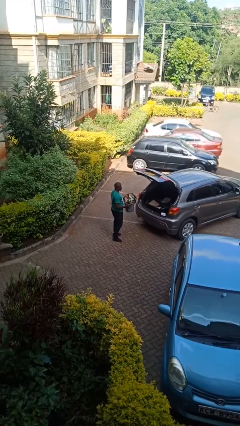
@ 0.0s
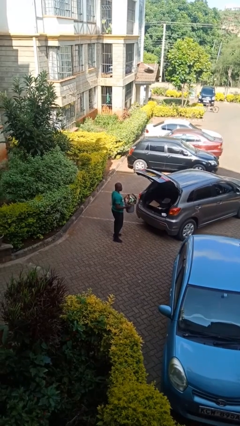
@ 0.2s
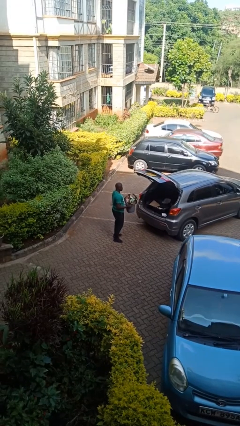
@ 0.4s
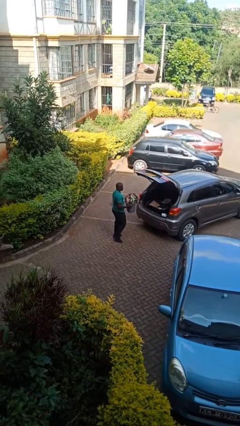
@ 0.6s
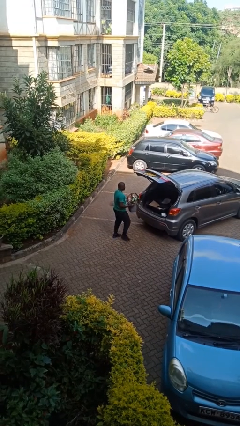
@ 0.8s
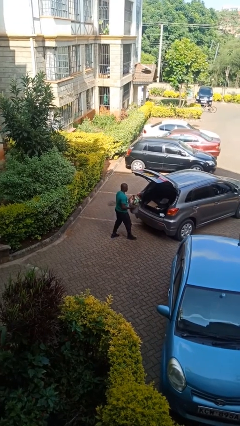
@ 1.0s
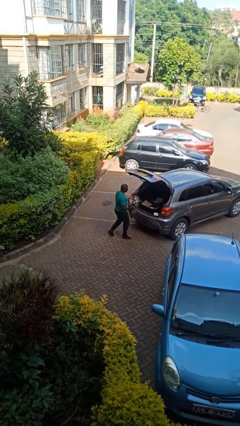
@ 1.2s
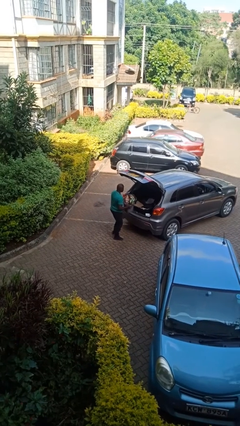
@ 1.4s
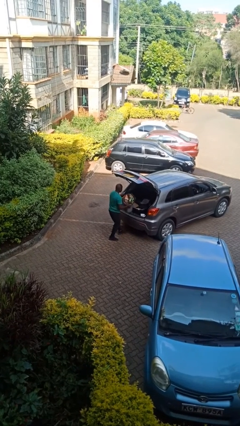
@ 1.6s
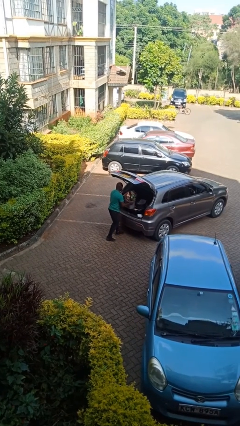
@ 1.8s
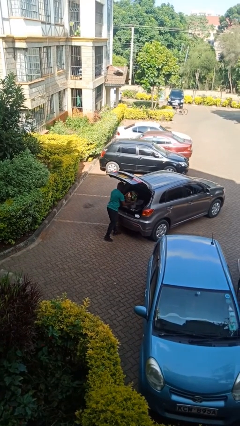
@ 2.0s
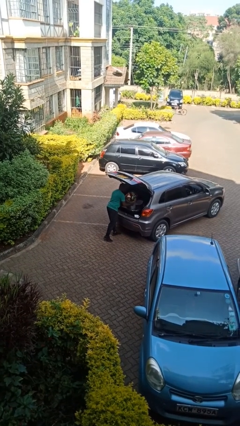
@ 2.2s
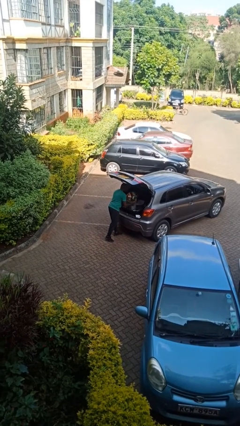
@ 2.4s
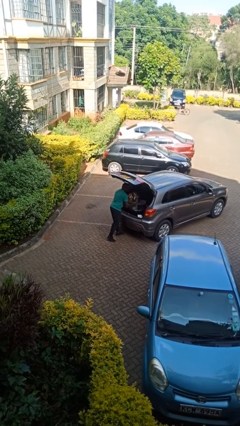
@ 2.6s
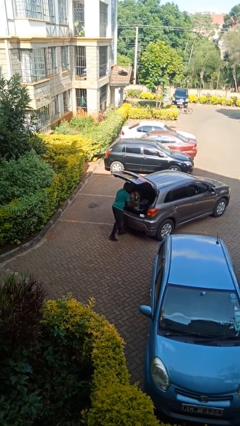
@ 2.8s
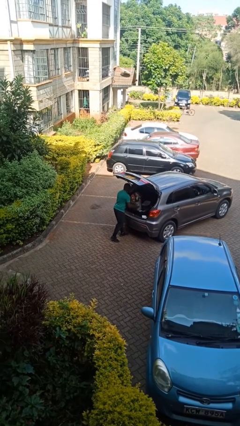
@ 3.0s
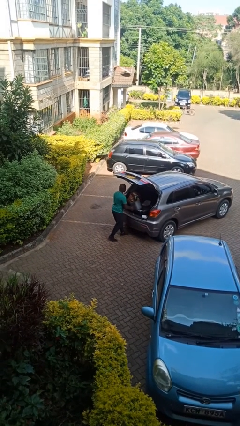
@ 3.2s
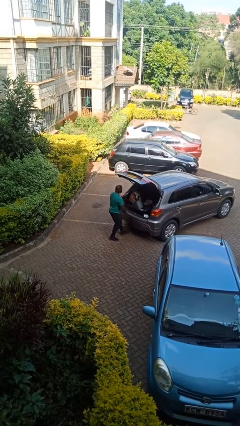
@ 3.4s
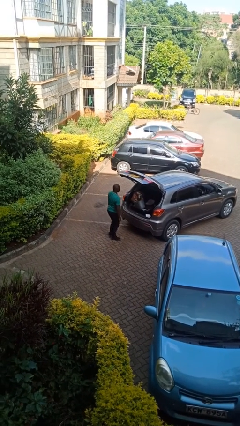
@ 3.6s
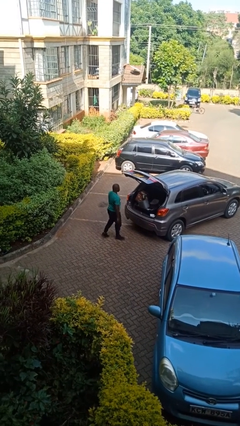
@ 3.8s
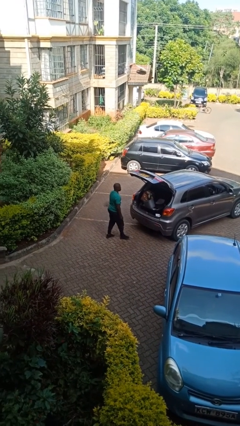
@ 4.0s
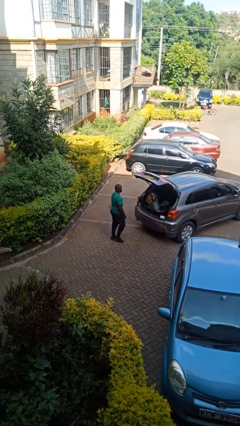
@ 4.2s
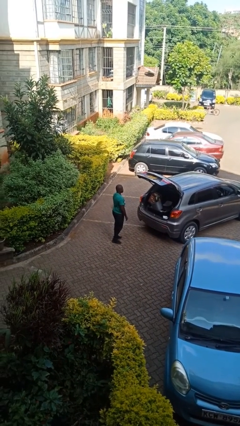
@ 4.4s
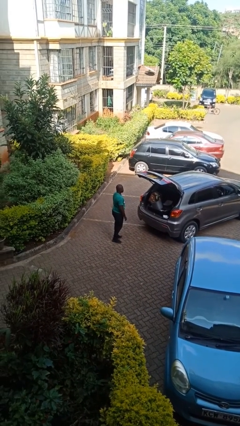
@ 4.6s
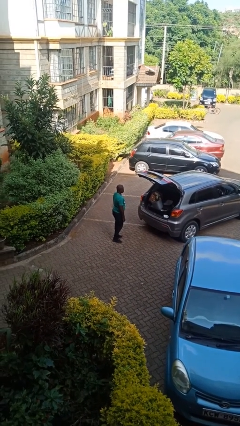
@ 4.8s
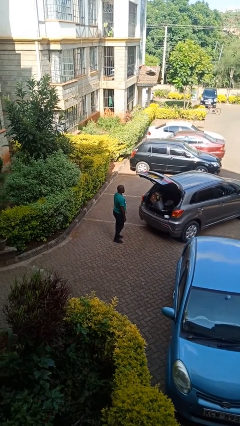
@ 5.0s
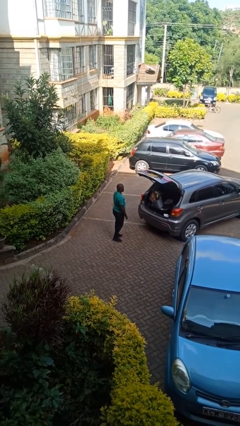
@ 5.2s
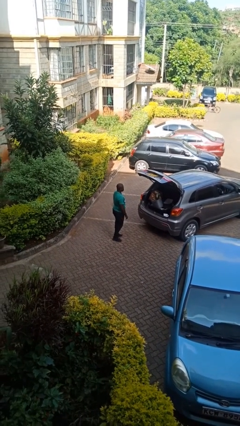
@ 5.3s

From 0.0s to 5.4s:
person loads car

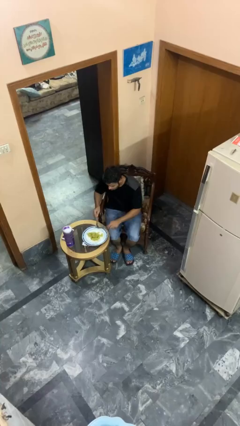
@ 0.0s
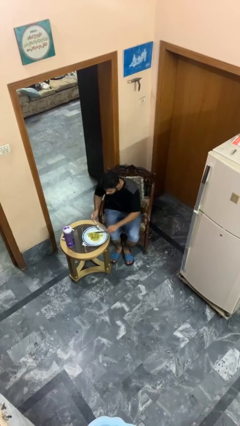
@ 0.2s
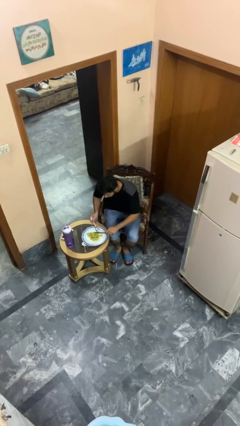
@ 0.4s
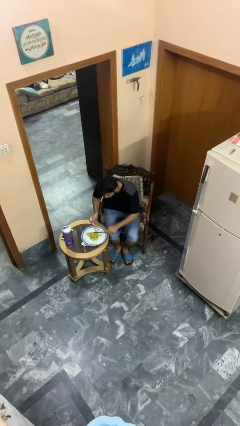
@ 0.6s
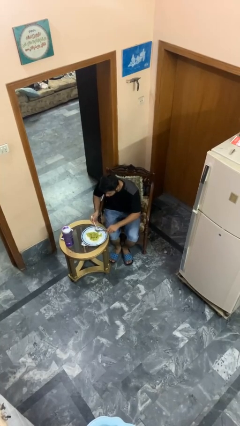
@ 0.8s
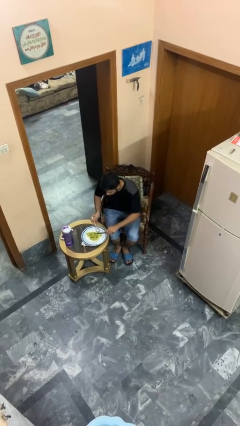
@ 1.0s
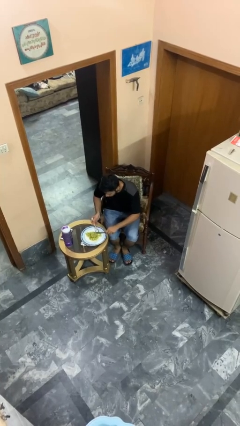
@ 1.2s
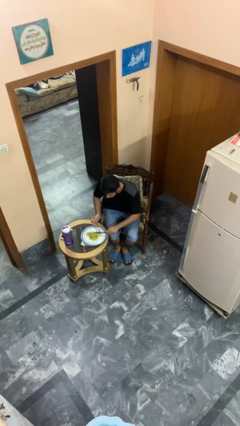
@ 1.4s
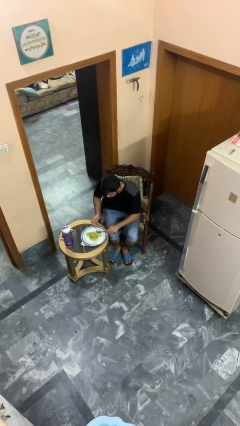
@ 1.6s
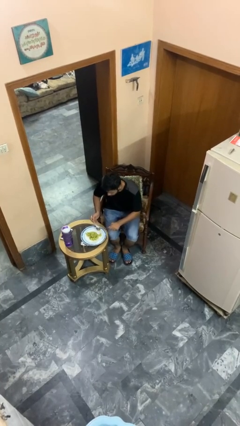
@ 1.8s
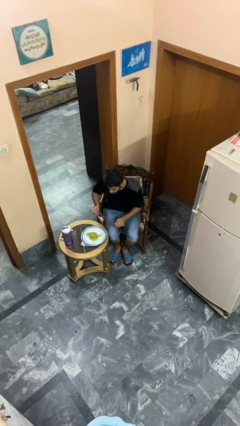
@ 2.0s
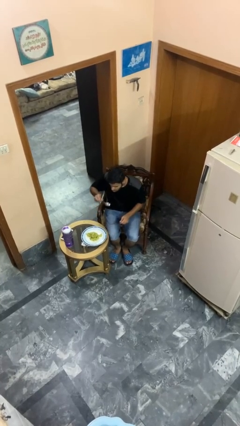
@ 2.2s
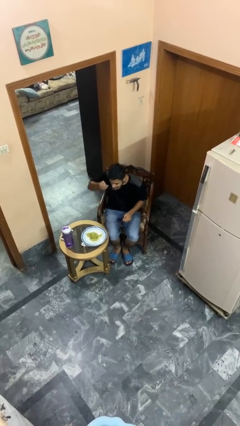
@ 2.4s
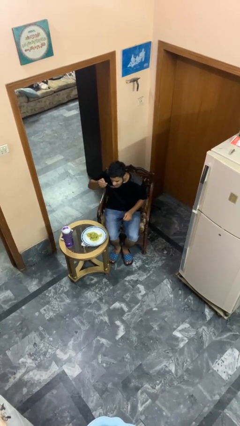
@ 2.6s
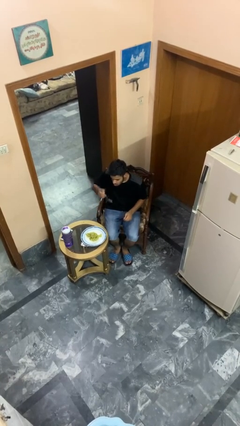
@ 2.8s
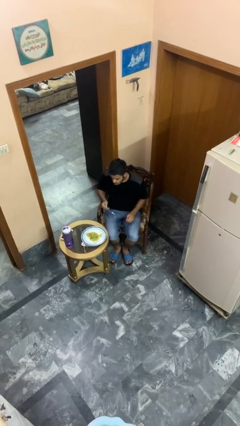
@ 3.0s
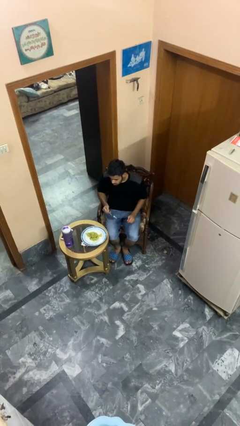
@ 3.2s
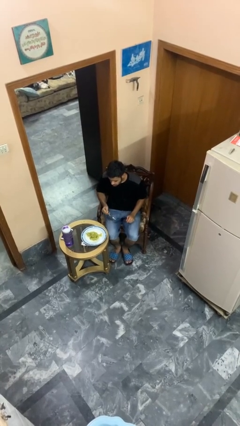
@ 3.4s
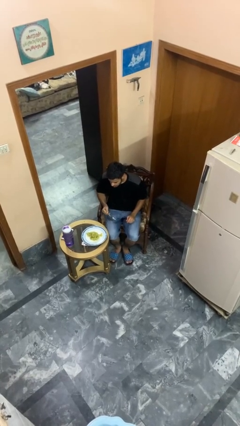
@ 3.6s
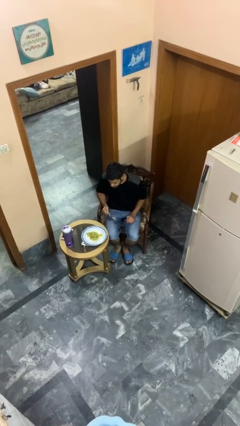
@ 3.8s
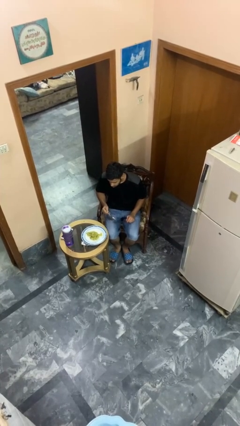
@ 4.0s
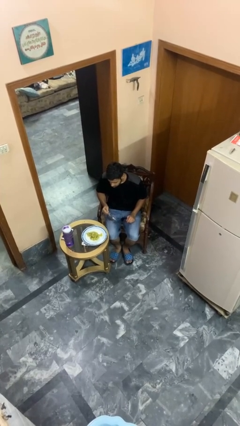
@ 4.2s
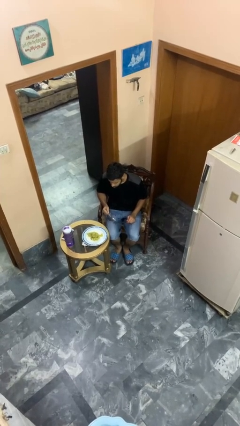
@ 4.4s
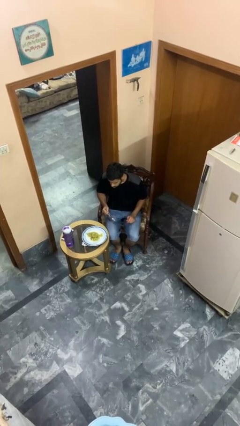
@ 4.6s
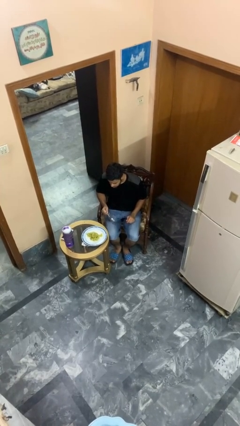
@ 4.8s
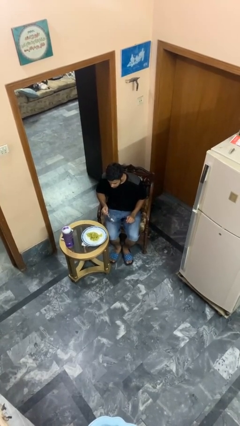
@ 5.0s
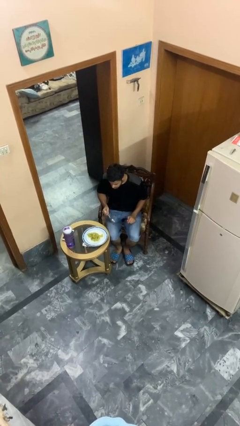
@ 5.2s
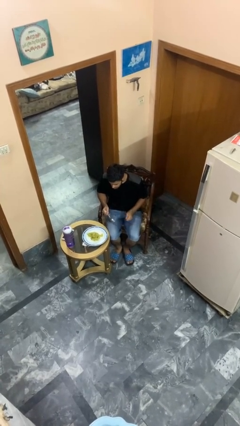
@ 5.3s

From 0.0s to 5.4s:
person eats with utensil

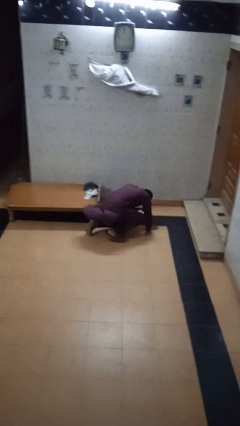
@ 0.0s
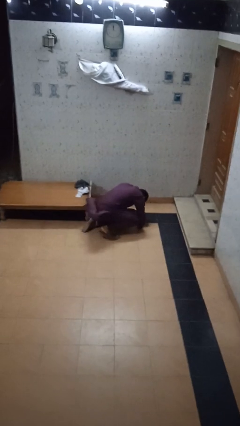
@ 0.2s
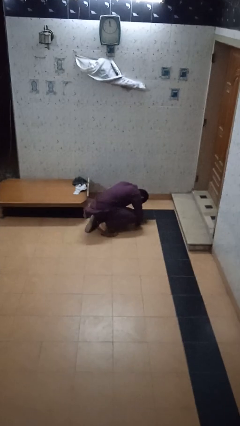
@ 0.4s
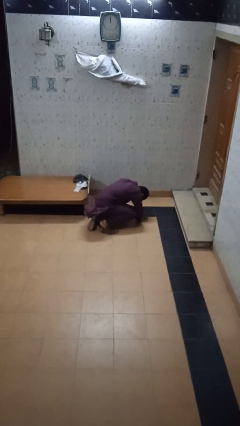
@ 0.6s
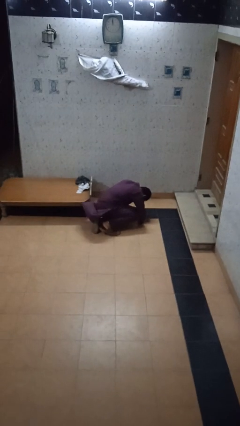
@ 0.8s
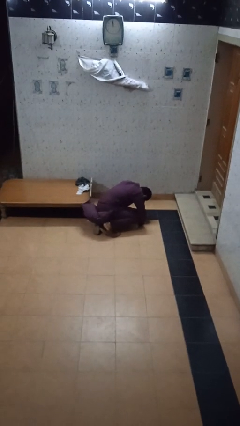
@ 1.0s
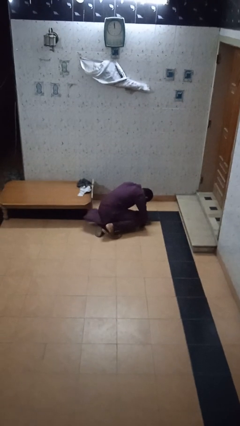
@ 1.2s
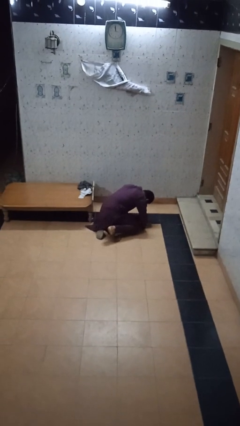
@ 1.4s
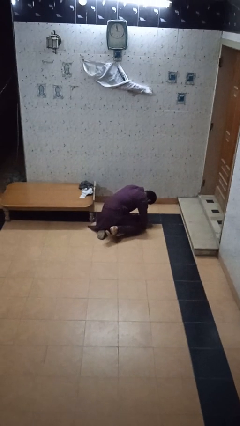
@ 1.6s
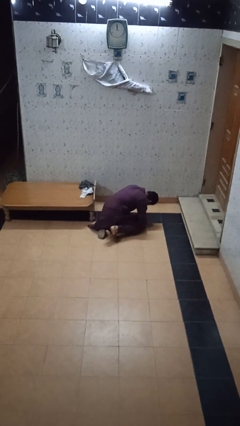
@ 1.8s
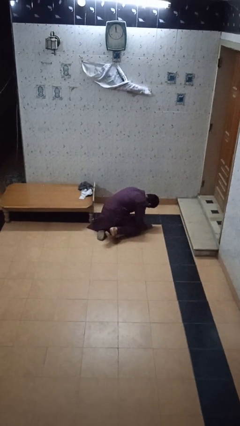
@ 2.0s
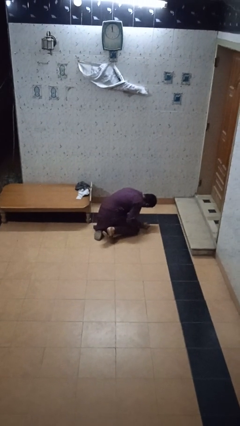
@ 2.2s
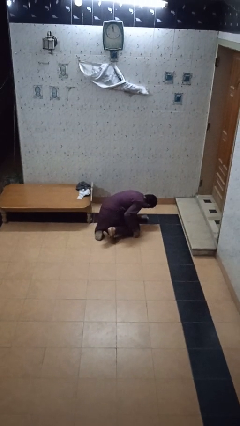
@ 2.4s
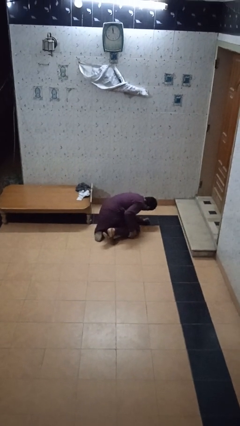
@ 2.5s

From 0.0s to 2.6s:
person lies down on floor

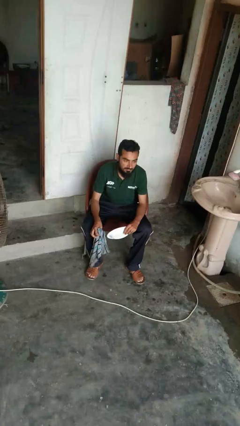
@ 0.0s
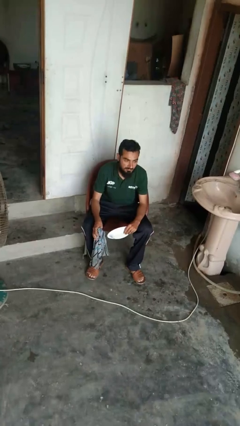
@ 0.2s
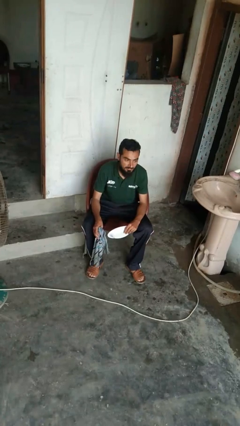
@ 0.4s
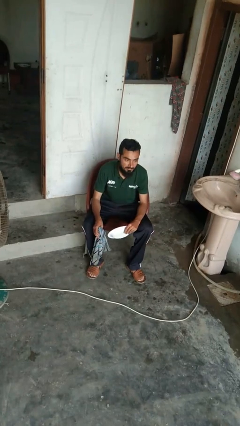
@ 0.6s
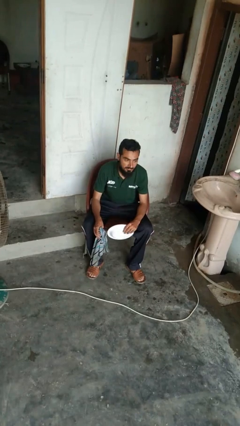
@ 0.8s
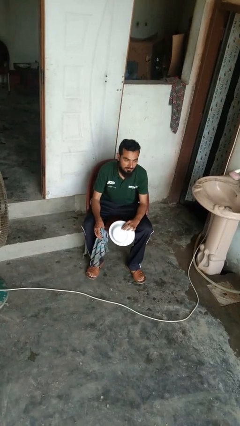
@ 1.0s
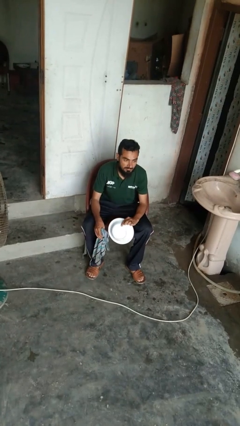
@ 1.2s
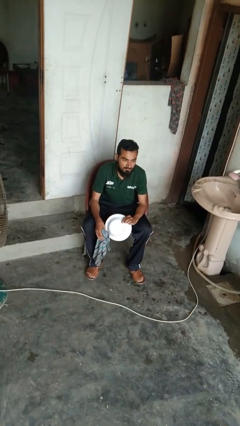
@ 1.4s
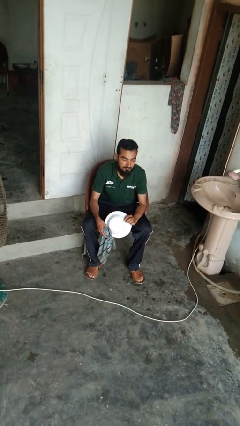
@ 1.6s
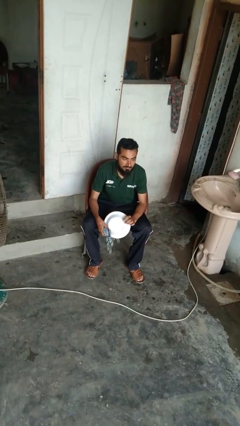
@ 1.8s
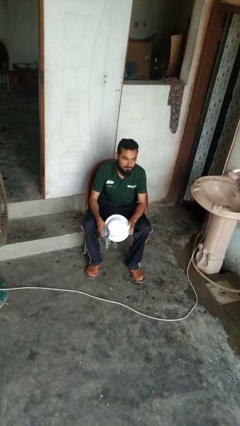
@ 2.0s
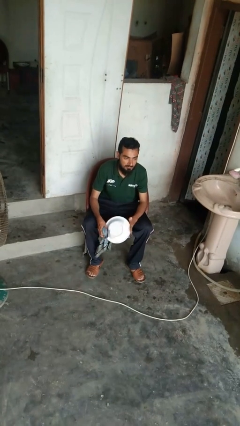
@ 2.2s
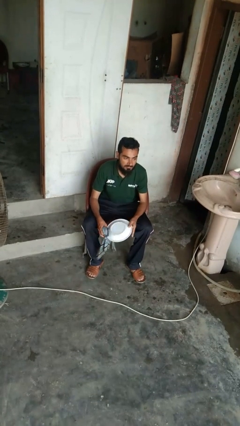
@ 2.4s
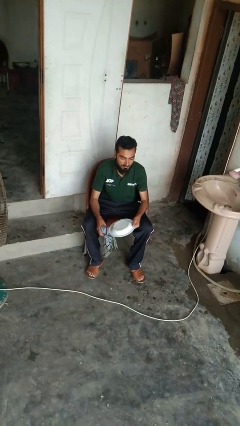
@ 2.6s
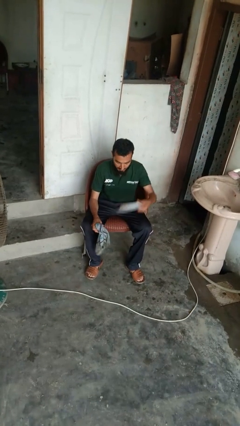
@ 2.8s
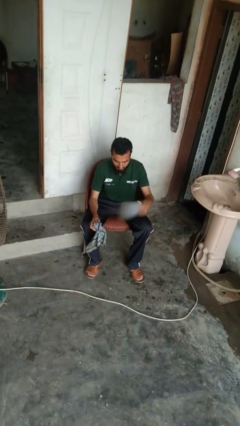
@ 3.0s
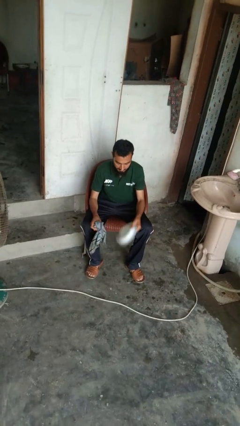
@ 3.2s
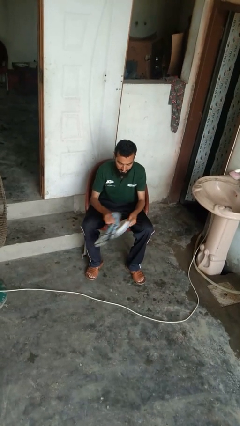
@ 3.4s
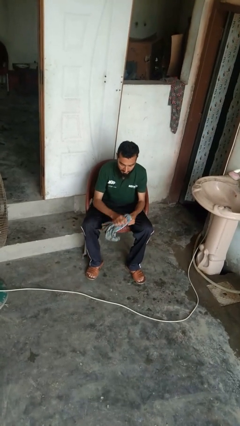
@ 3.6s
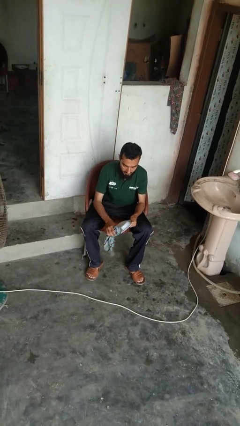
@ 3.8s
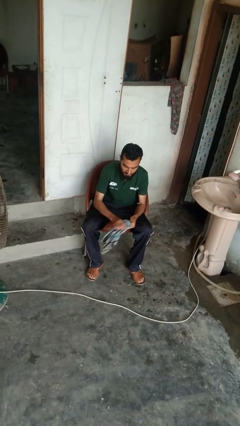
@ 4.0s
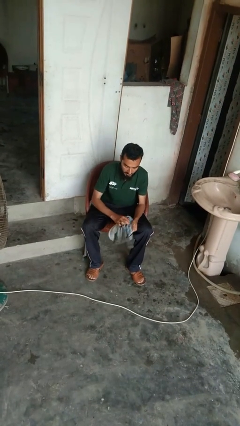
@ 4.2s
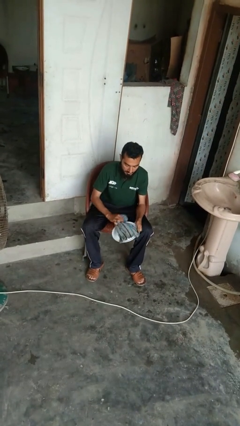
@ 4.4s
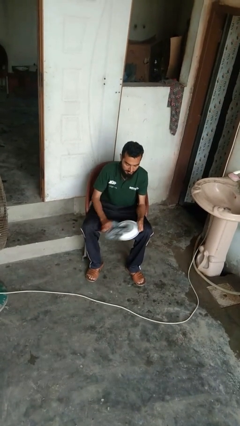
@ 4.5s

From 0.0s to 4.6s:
person dries dish
